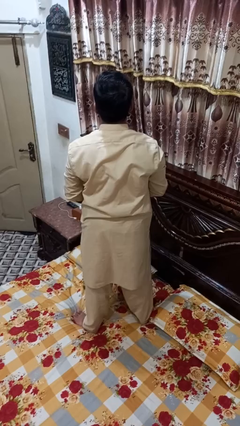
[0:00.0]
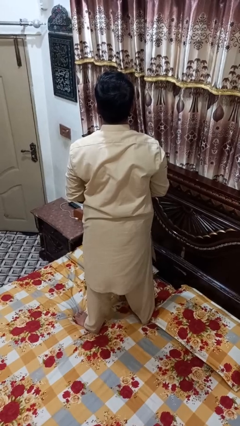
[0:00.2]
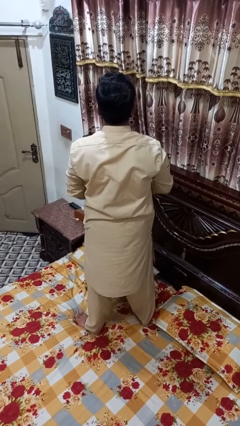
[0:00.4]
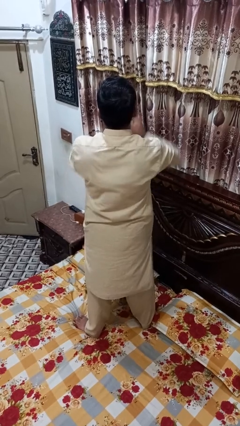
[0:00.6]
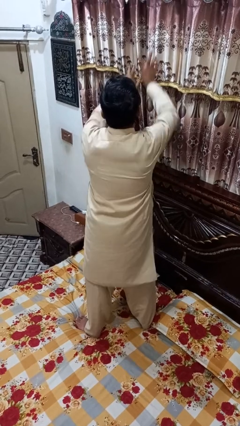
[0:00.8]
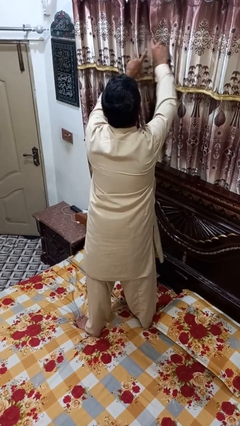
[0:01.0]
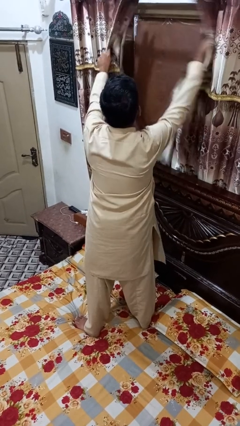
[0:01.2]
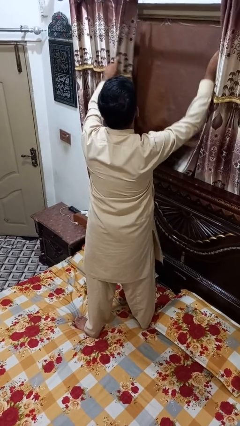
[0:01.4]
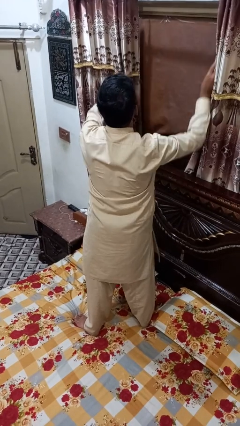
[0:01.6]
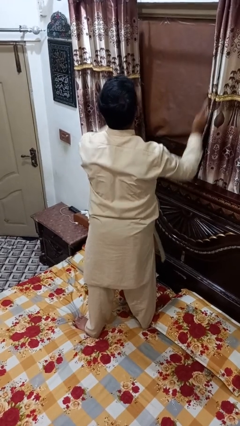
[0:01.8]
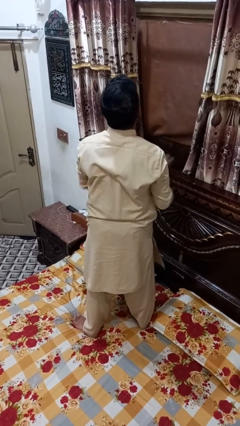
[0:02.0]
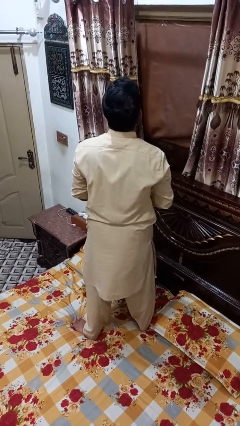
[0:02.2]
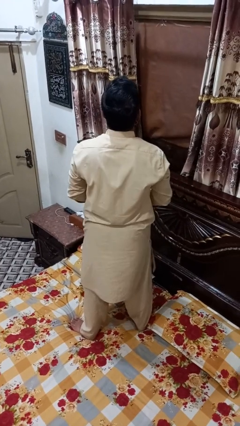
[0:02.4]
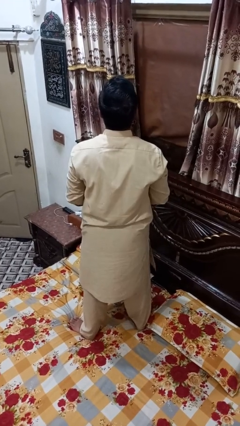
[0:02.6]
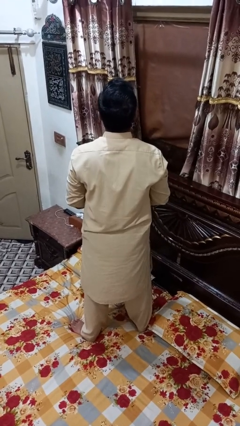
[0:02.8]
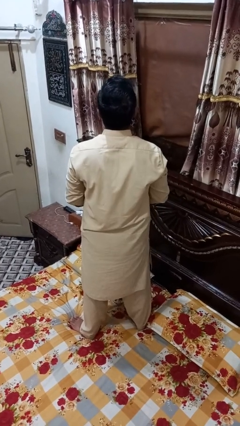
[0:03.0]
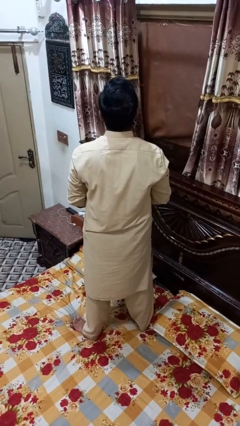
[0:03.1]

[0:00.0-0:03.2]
person opens curtains

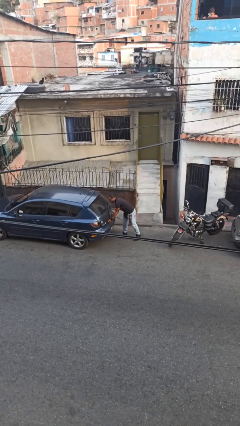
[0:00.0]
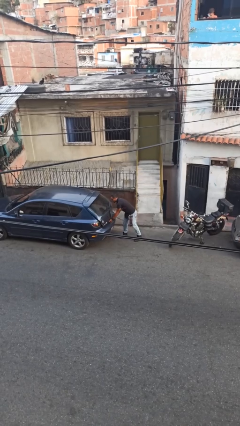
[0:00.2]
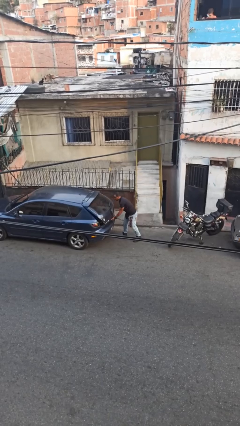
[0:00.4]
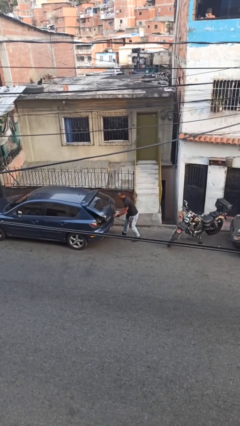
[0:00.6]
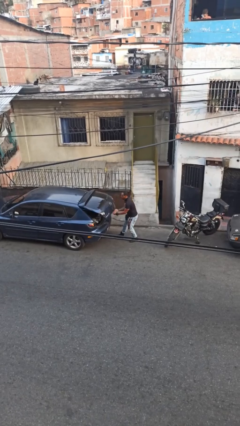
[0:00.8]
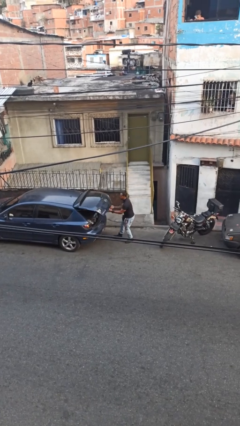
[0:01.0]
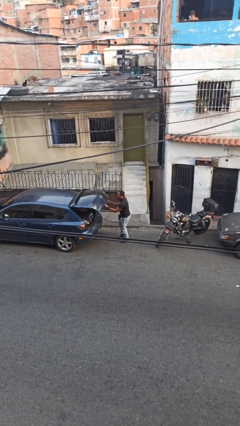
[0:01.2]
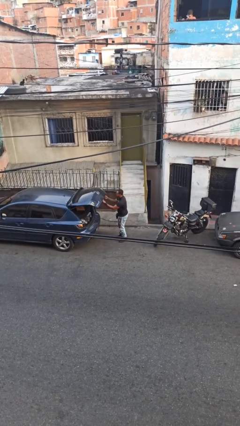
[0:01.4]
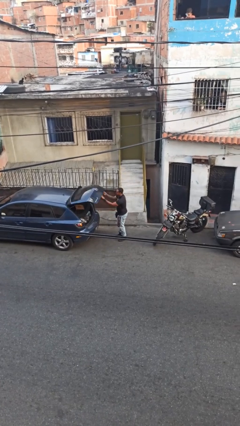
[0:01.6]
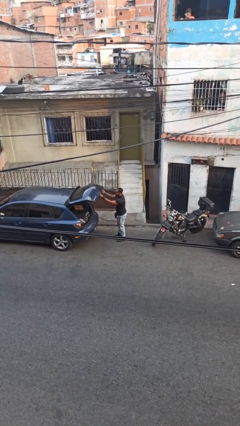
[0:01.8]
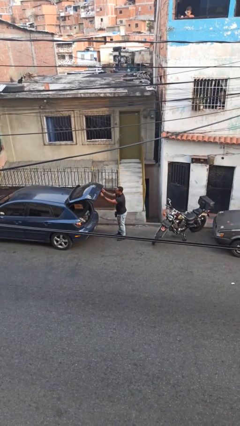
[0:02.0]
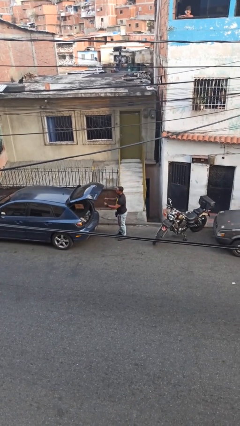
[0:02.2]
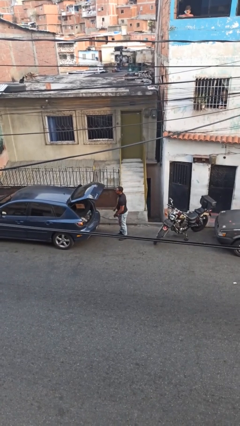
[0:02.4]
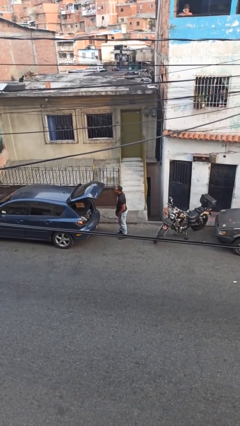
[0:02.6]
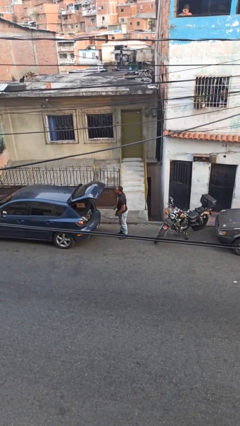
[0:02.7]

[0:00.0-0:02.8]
person opens car trunk

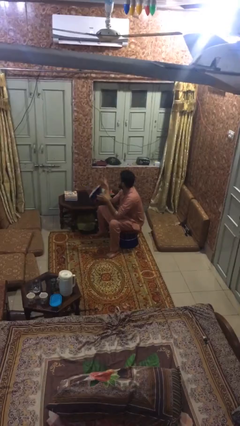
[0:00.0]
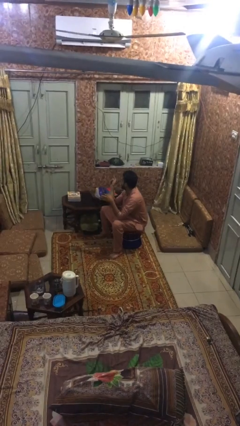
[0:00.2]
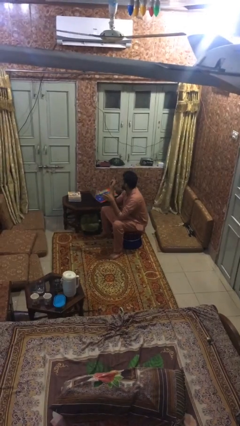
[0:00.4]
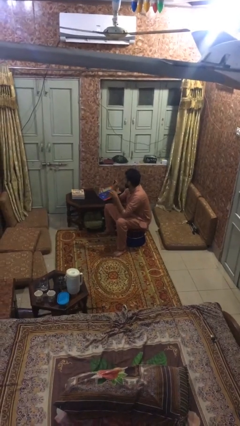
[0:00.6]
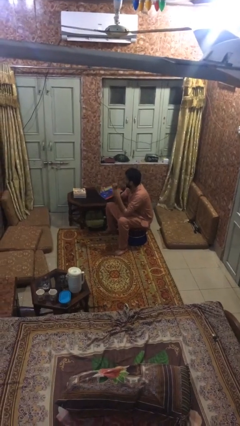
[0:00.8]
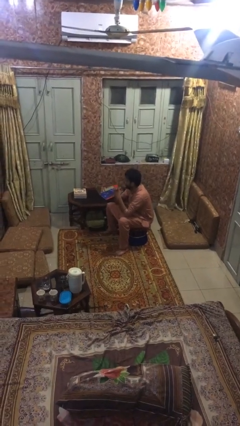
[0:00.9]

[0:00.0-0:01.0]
person puts down object on table

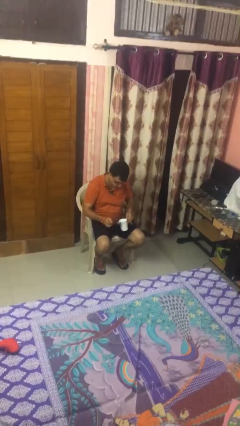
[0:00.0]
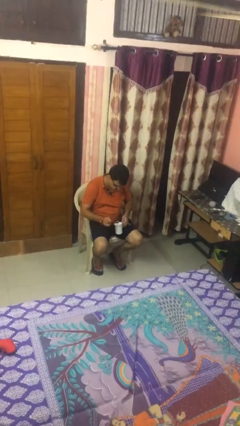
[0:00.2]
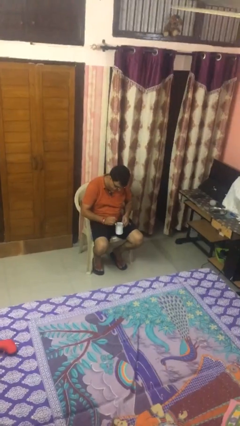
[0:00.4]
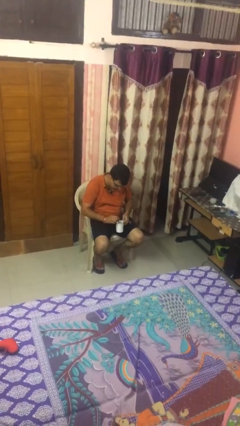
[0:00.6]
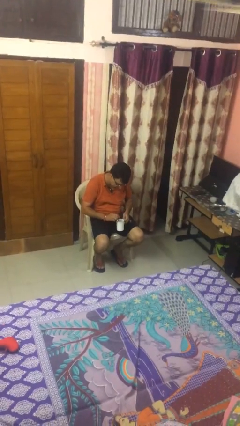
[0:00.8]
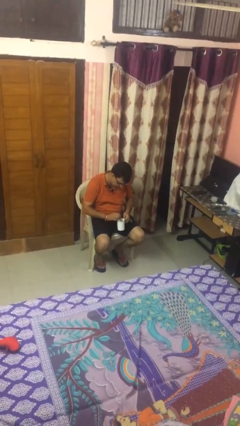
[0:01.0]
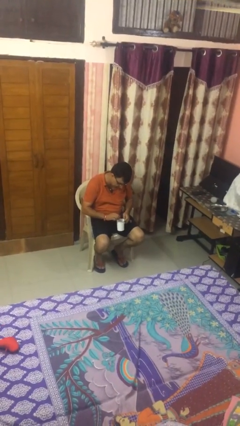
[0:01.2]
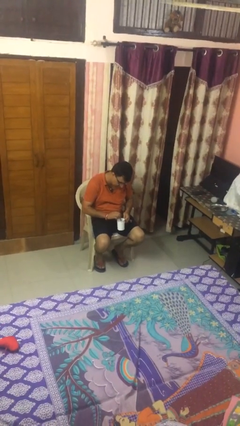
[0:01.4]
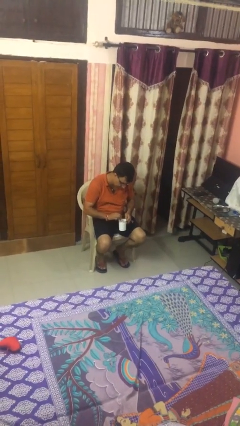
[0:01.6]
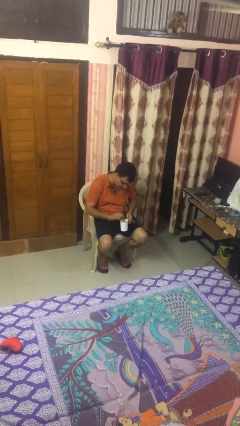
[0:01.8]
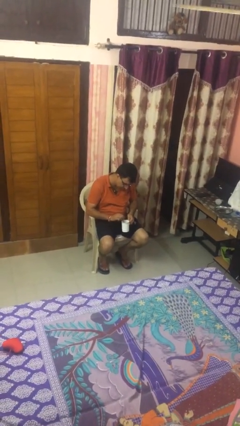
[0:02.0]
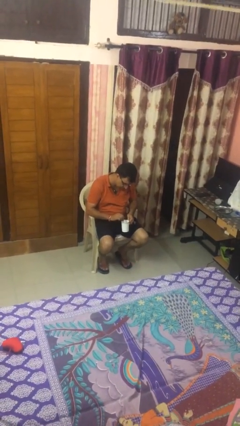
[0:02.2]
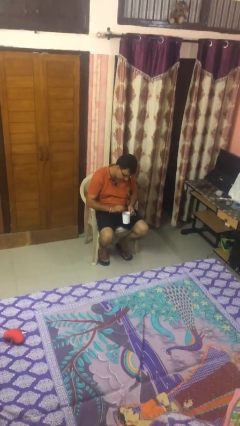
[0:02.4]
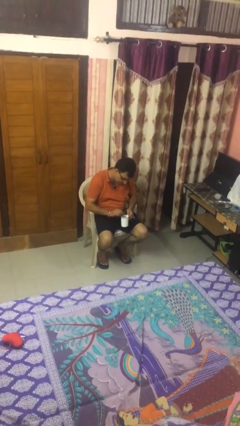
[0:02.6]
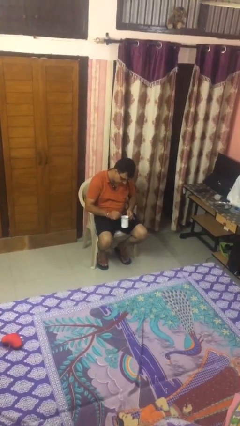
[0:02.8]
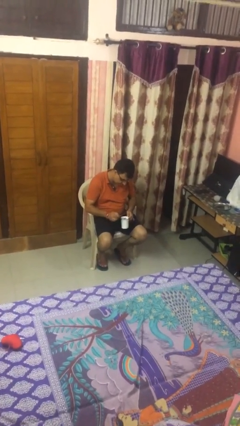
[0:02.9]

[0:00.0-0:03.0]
person stirs mug

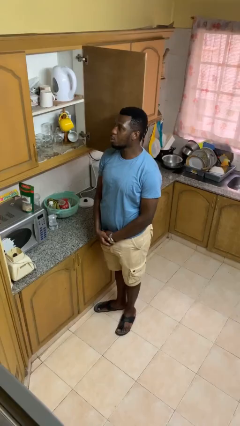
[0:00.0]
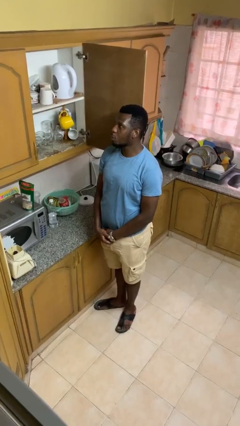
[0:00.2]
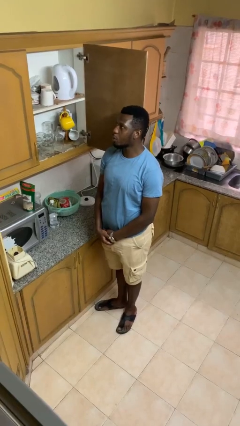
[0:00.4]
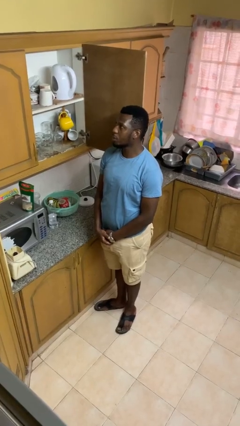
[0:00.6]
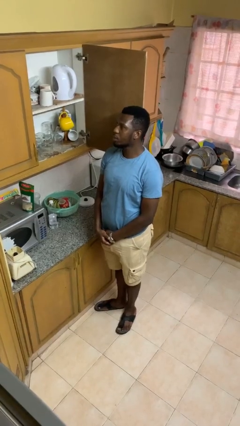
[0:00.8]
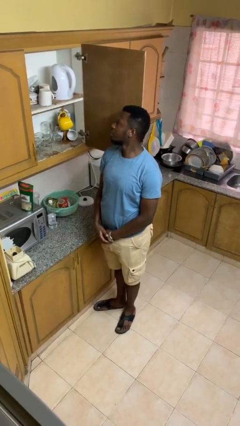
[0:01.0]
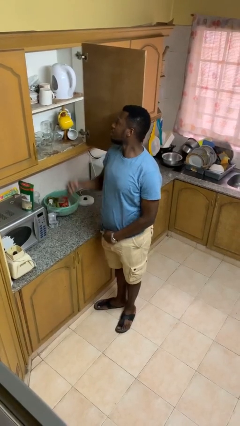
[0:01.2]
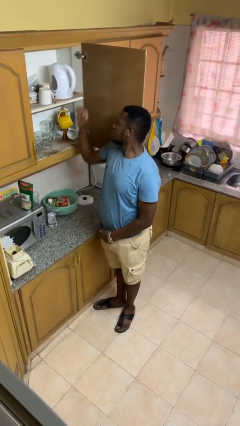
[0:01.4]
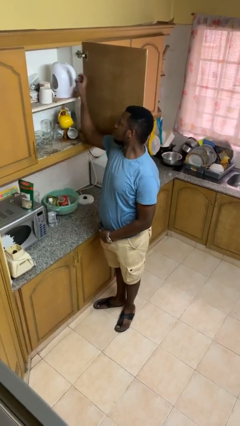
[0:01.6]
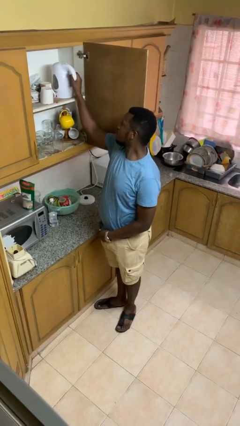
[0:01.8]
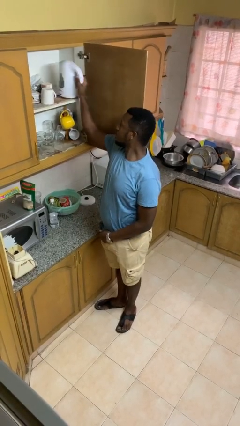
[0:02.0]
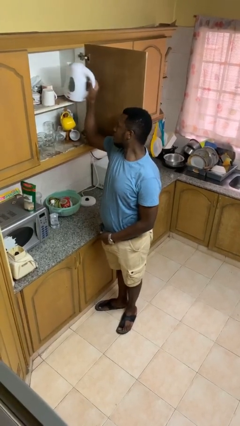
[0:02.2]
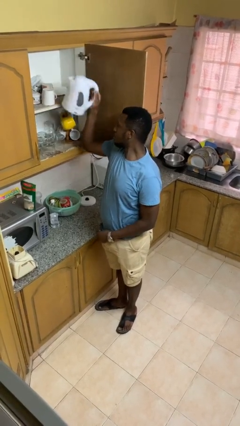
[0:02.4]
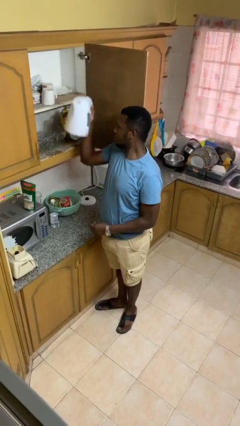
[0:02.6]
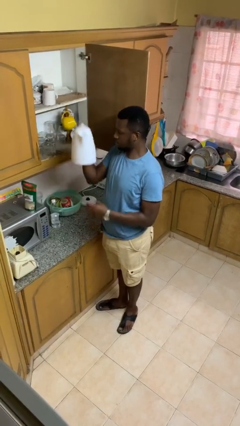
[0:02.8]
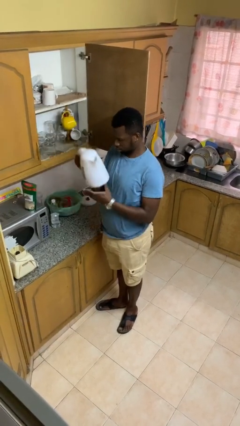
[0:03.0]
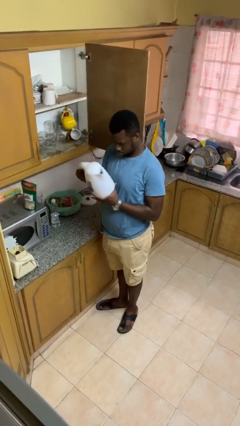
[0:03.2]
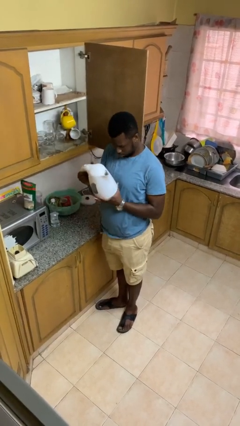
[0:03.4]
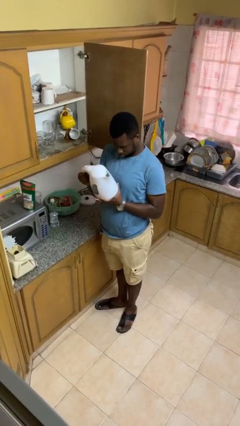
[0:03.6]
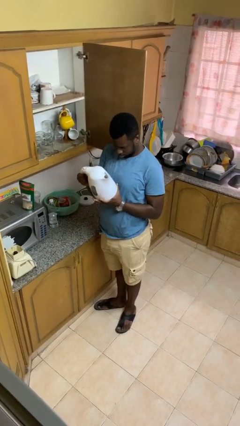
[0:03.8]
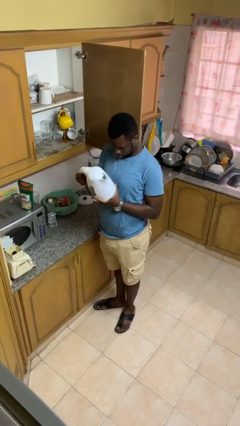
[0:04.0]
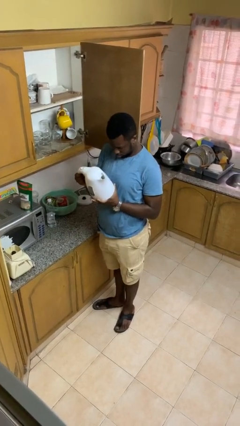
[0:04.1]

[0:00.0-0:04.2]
person picks up object from shelf

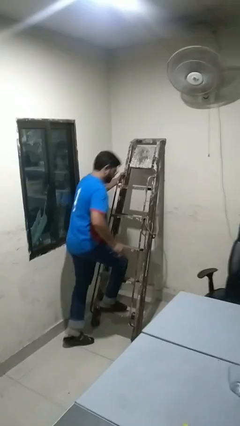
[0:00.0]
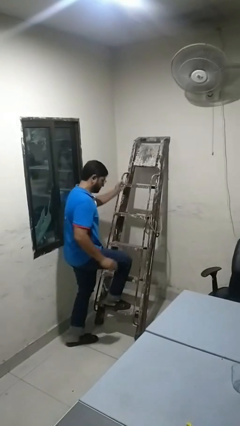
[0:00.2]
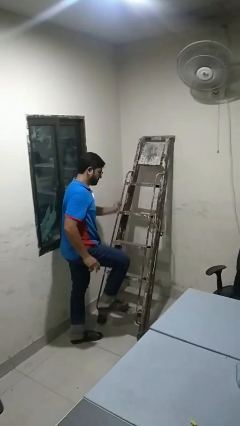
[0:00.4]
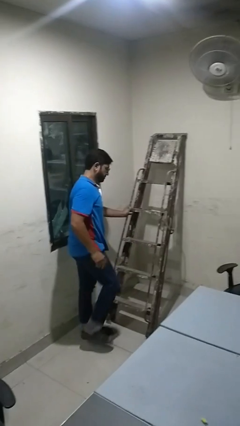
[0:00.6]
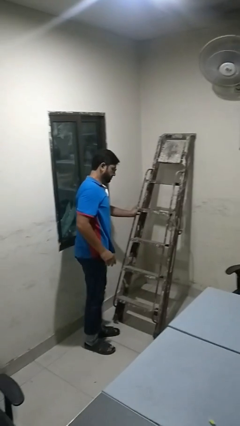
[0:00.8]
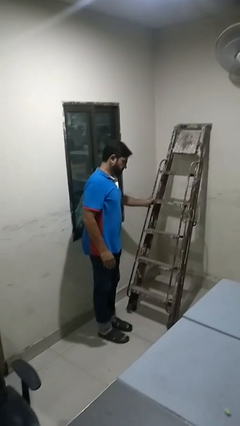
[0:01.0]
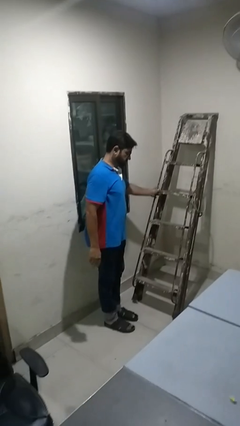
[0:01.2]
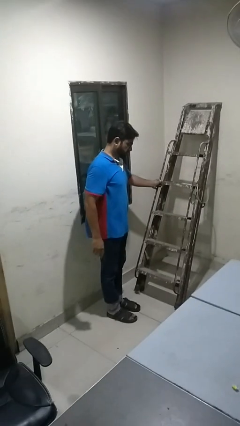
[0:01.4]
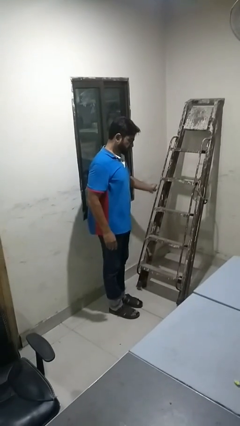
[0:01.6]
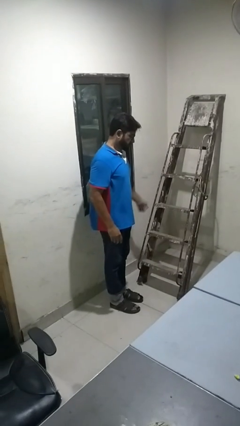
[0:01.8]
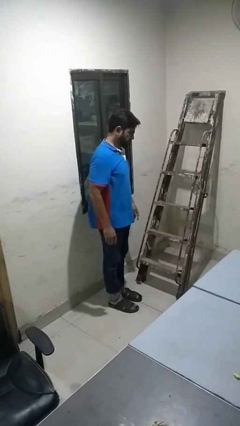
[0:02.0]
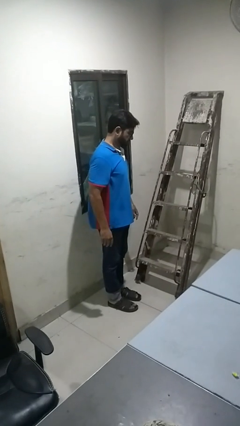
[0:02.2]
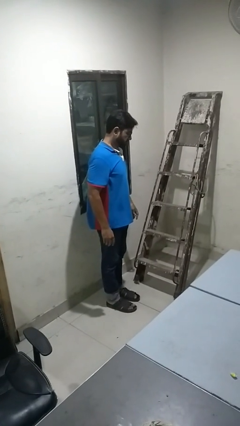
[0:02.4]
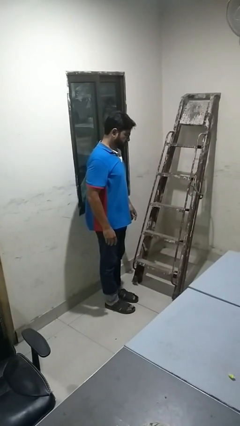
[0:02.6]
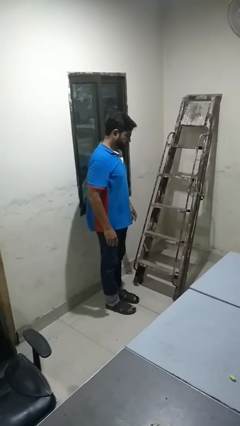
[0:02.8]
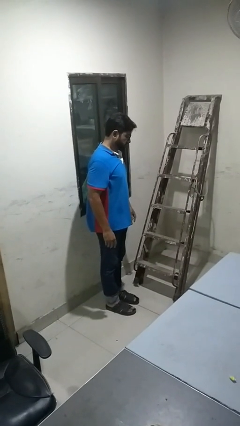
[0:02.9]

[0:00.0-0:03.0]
person climbs down ladder

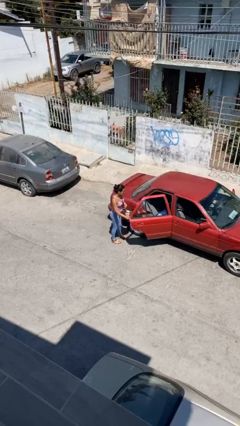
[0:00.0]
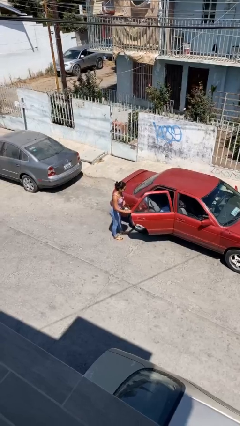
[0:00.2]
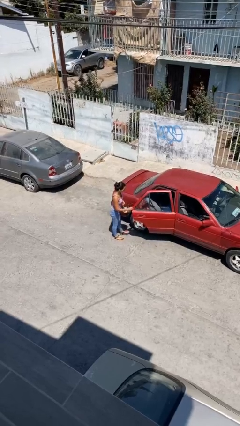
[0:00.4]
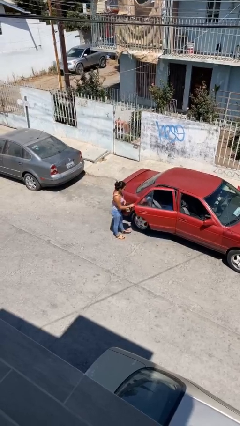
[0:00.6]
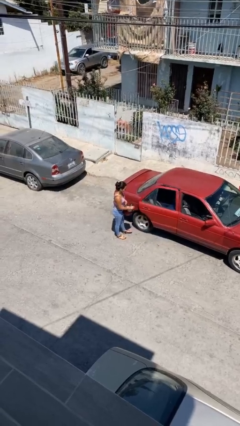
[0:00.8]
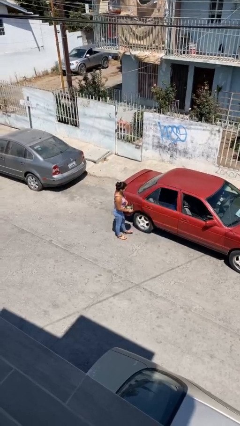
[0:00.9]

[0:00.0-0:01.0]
person closes car door
